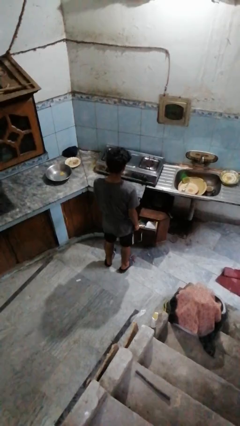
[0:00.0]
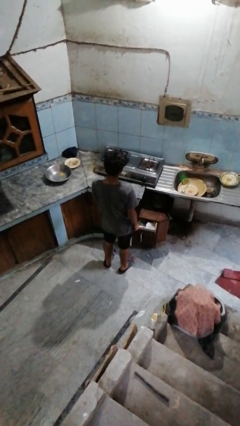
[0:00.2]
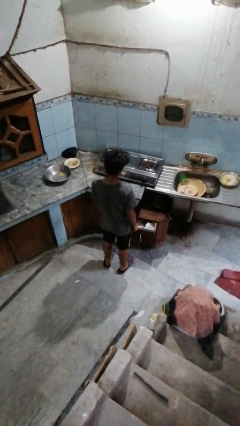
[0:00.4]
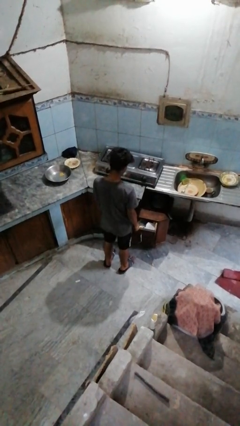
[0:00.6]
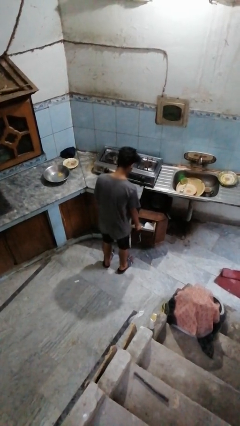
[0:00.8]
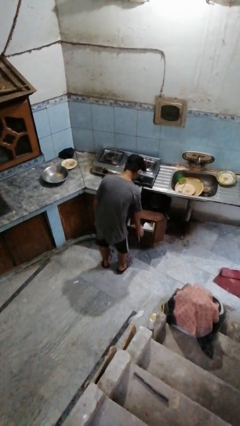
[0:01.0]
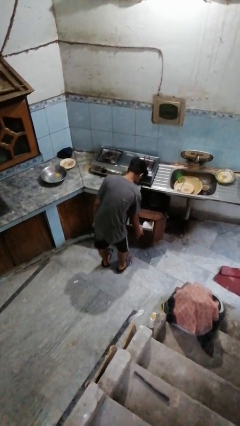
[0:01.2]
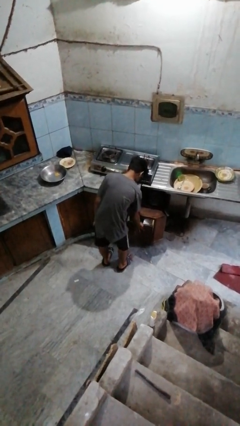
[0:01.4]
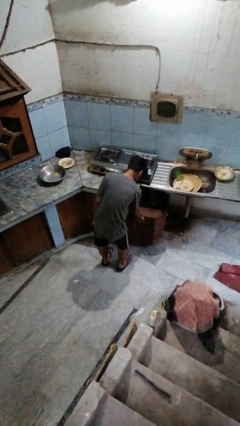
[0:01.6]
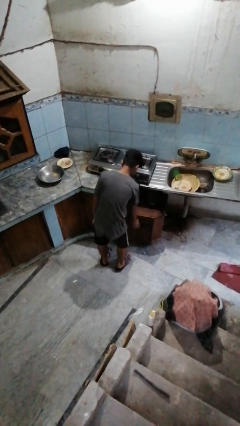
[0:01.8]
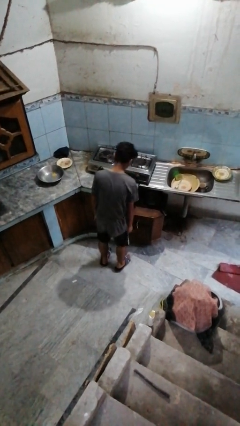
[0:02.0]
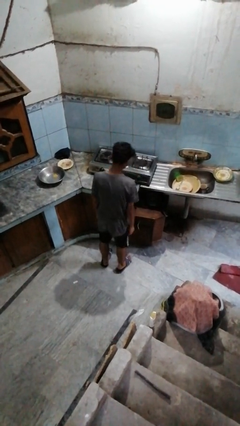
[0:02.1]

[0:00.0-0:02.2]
person closes kitchen drawer

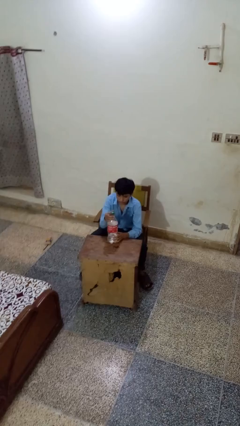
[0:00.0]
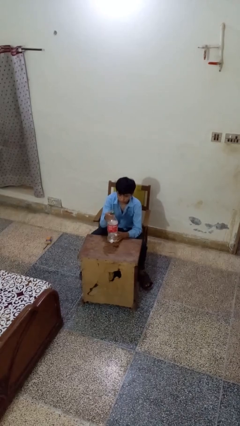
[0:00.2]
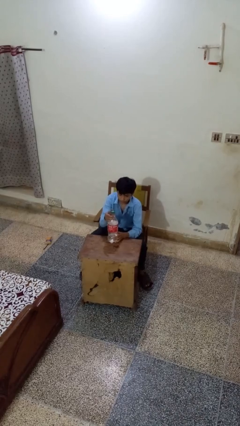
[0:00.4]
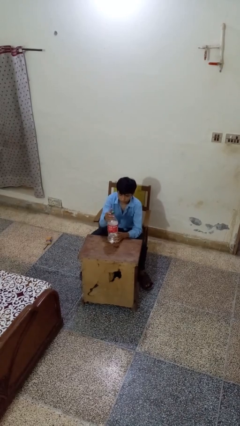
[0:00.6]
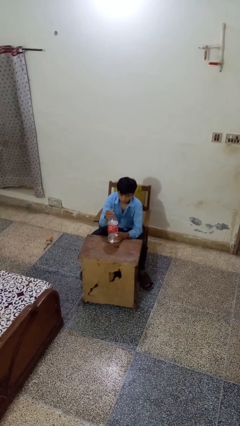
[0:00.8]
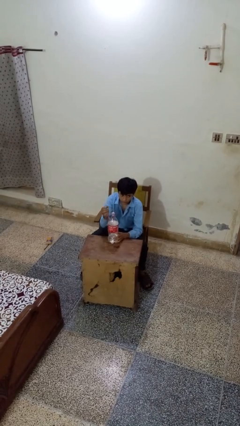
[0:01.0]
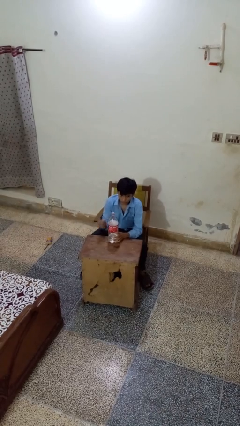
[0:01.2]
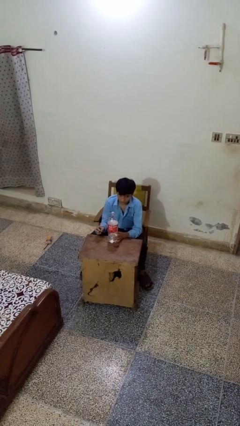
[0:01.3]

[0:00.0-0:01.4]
person unscrews lid from bottle

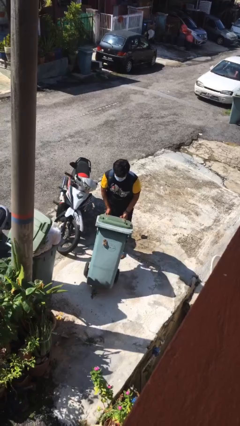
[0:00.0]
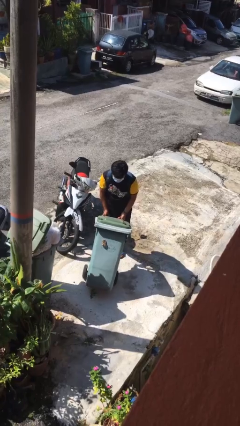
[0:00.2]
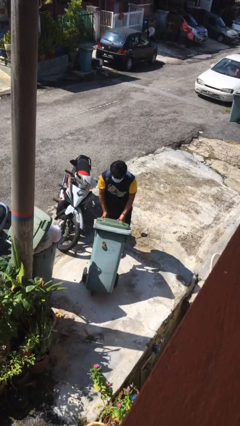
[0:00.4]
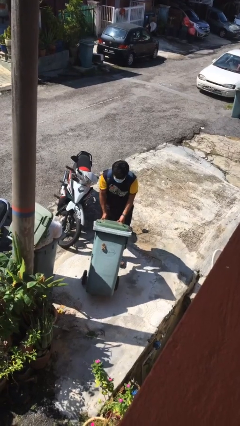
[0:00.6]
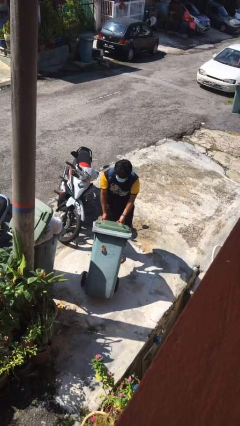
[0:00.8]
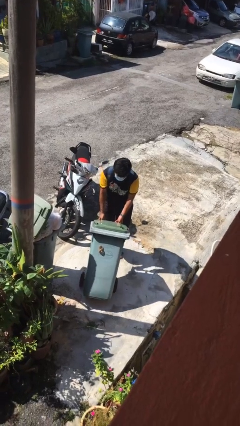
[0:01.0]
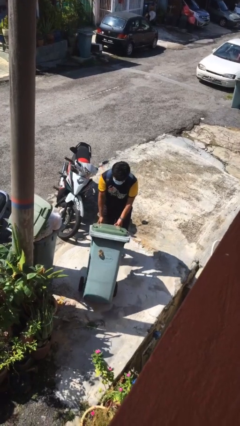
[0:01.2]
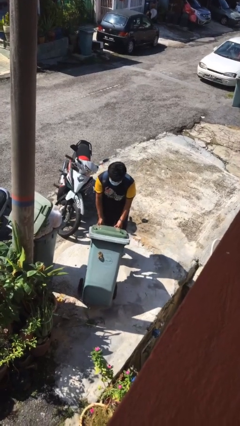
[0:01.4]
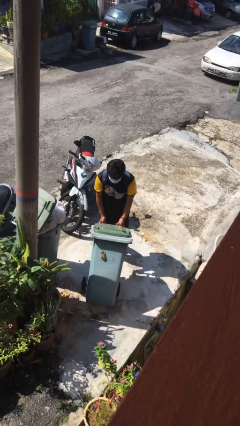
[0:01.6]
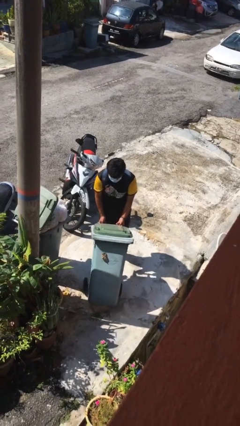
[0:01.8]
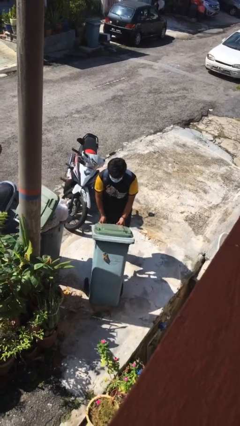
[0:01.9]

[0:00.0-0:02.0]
person pushes wheeled trashcan

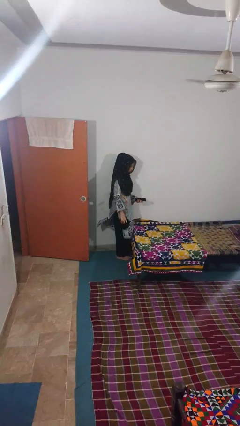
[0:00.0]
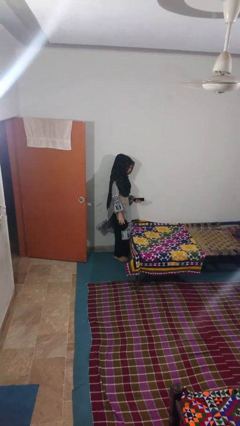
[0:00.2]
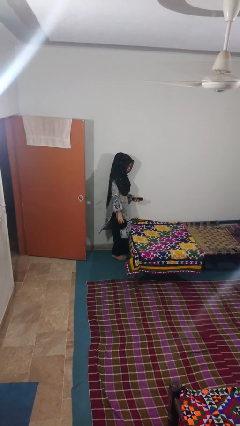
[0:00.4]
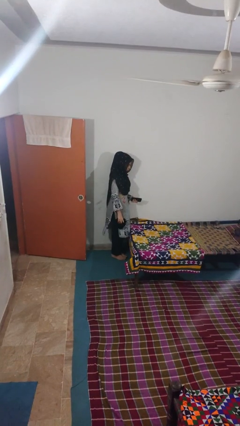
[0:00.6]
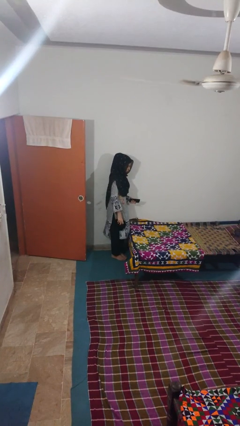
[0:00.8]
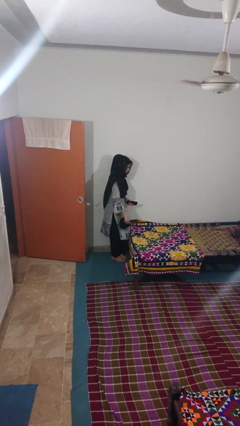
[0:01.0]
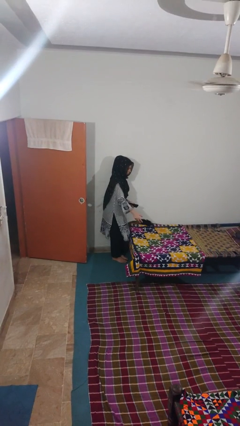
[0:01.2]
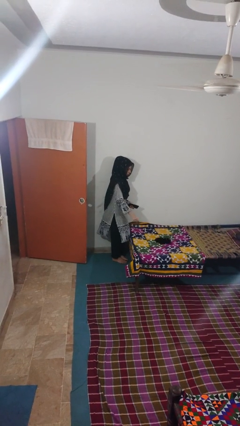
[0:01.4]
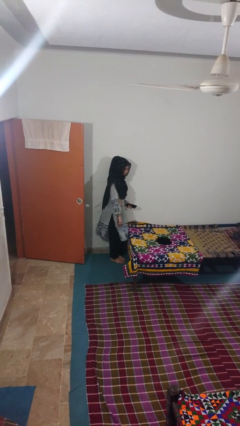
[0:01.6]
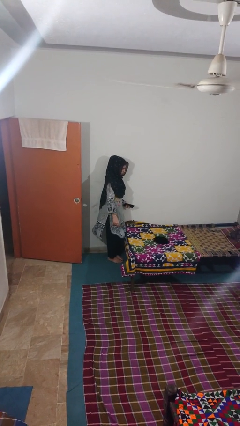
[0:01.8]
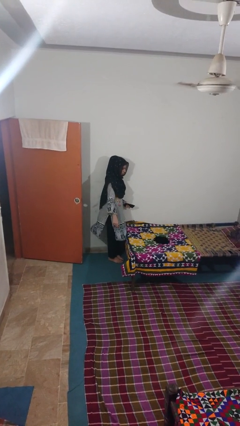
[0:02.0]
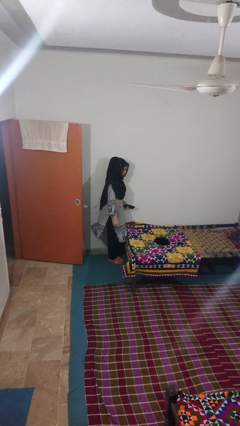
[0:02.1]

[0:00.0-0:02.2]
person throws object on bed

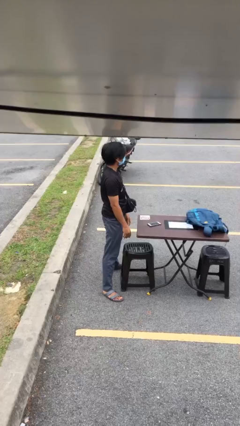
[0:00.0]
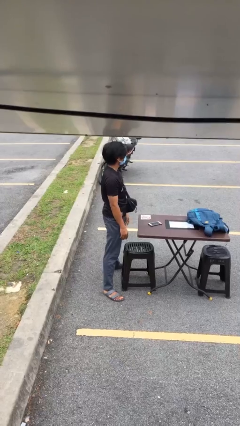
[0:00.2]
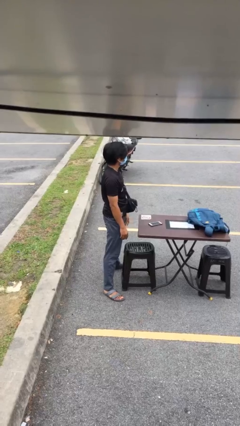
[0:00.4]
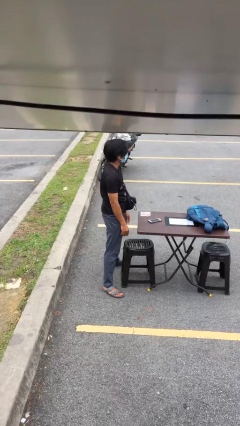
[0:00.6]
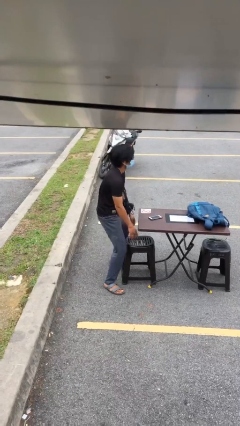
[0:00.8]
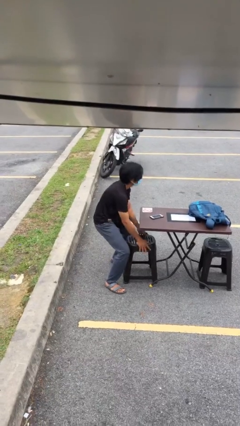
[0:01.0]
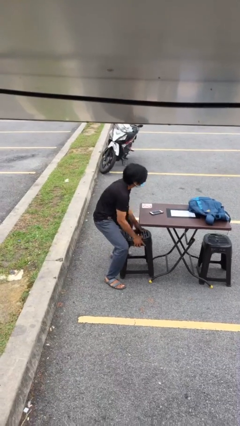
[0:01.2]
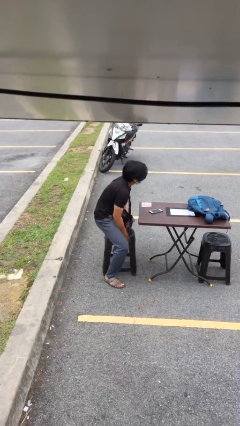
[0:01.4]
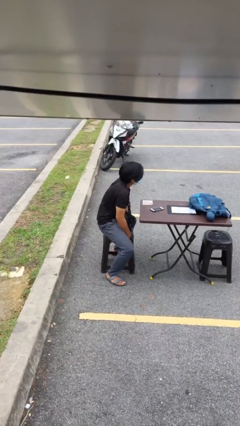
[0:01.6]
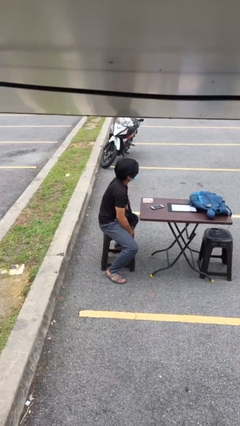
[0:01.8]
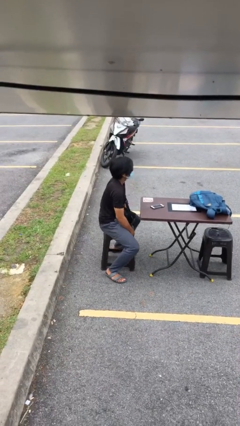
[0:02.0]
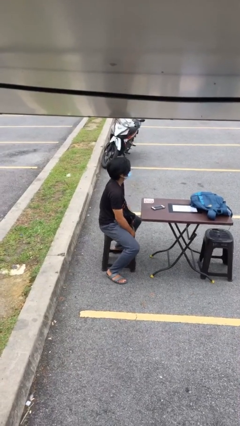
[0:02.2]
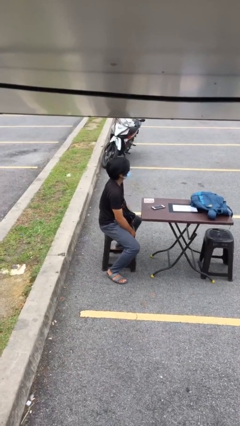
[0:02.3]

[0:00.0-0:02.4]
person sits down

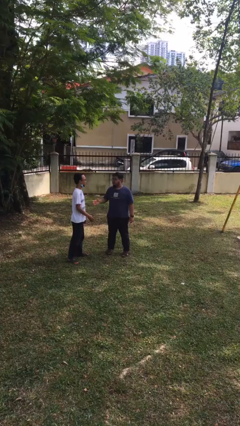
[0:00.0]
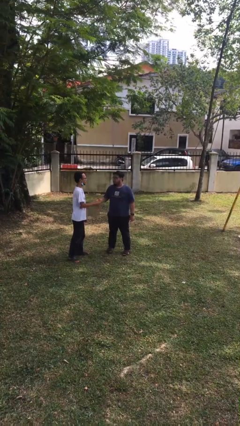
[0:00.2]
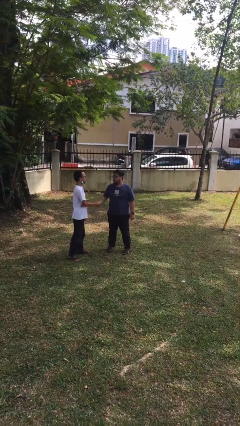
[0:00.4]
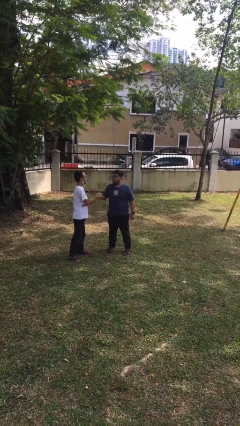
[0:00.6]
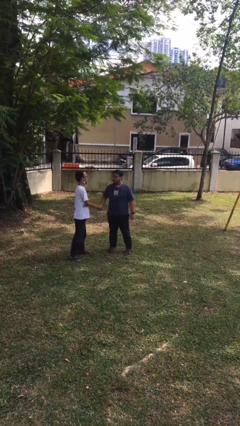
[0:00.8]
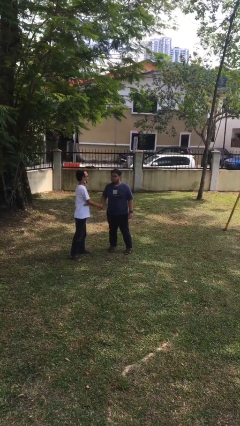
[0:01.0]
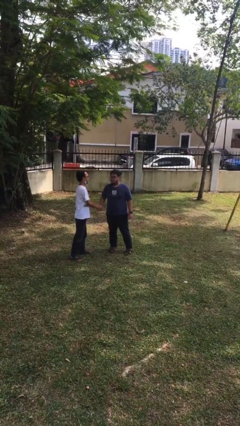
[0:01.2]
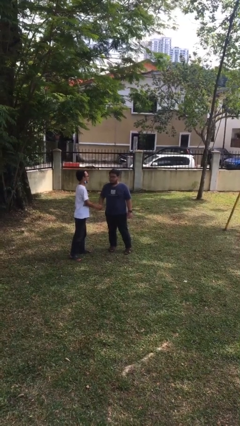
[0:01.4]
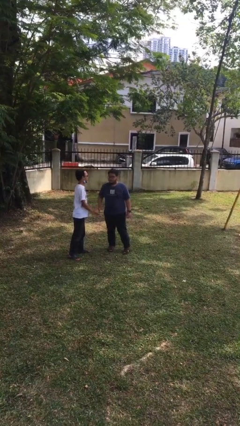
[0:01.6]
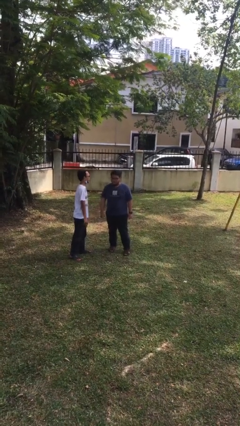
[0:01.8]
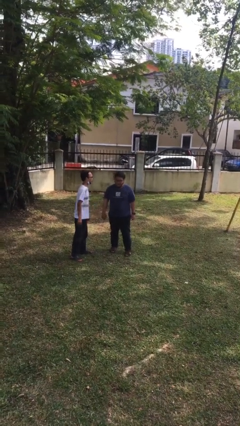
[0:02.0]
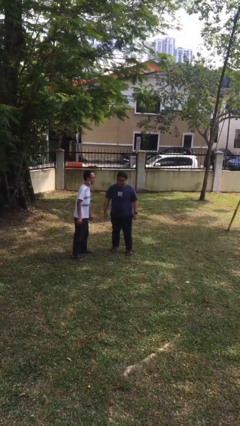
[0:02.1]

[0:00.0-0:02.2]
person shakes hand

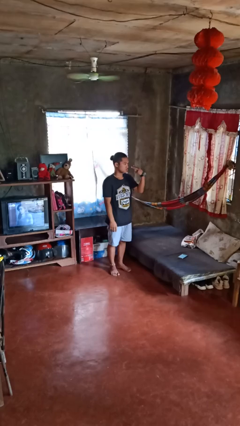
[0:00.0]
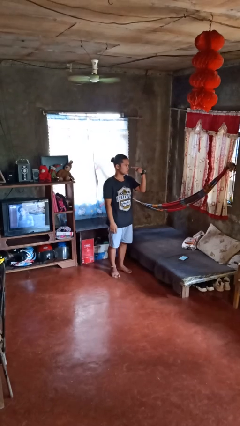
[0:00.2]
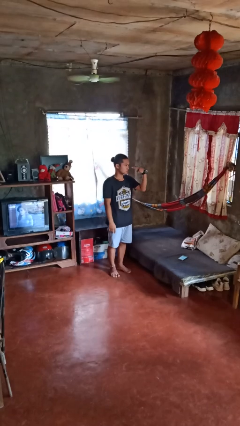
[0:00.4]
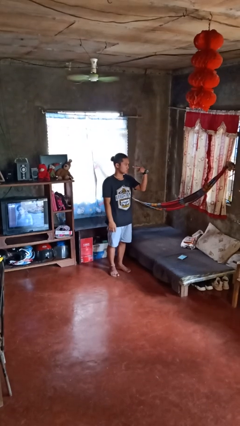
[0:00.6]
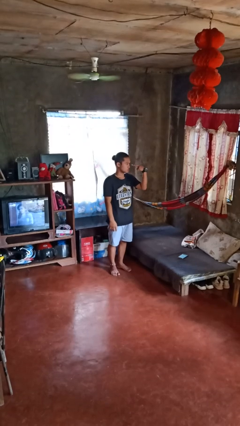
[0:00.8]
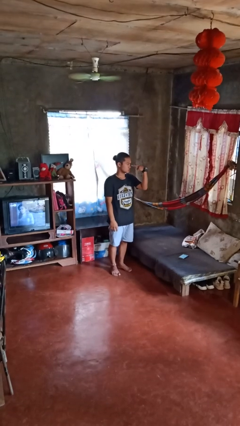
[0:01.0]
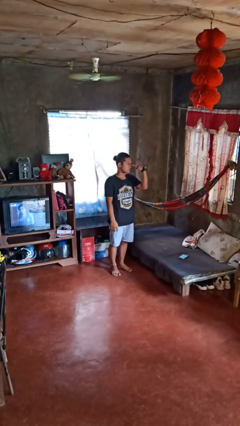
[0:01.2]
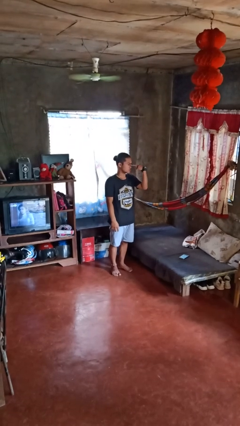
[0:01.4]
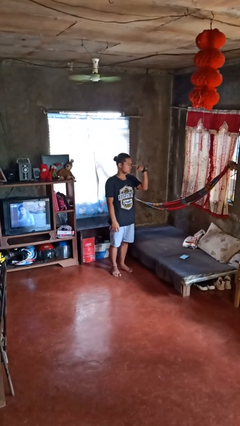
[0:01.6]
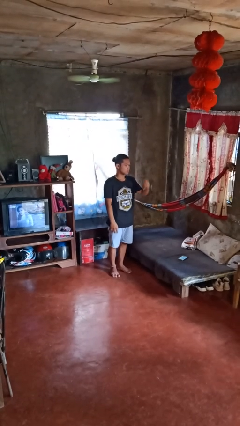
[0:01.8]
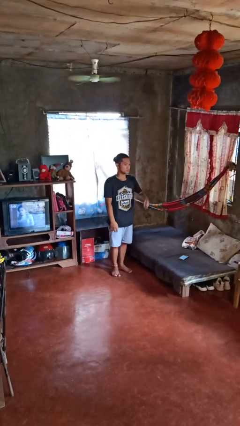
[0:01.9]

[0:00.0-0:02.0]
person gestures watch closely

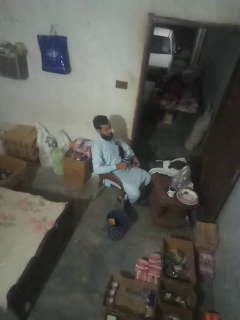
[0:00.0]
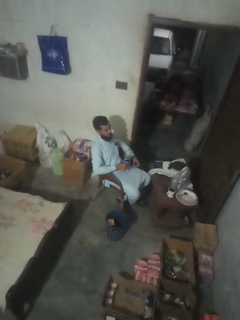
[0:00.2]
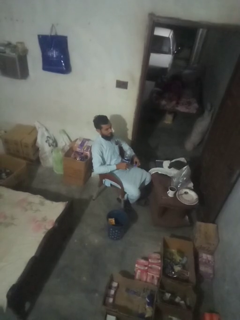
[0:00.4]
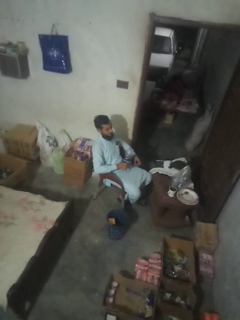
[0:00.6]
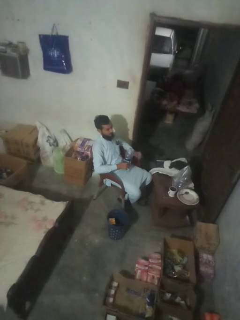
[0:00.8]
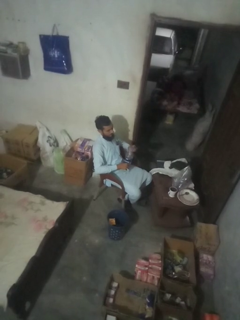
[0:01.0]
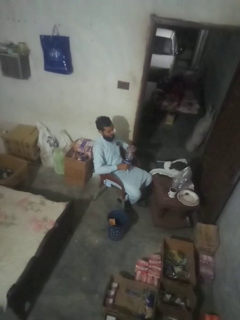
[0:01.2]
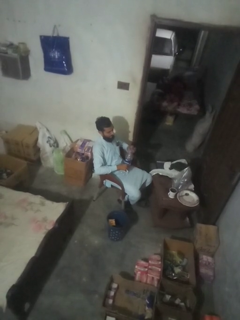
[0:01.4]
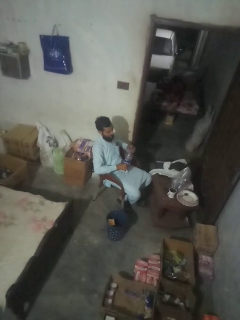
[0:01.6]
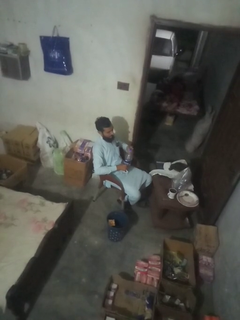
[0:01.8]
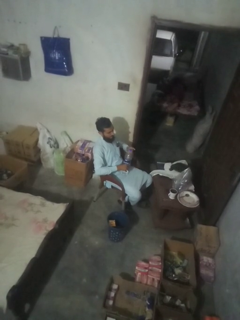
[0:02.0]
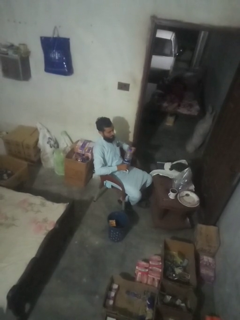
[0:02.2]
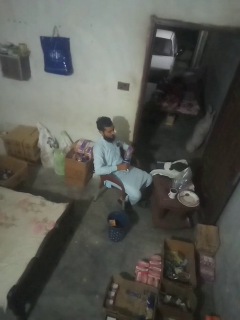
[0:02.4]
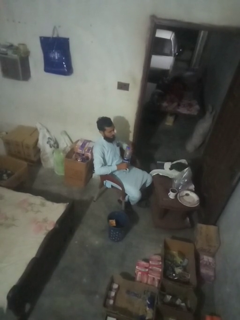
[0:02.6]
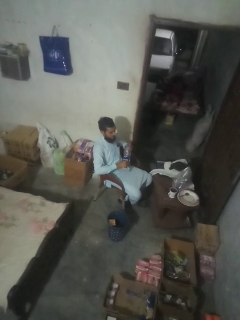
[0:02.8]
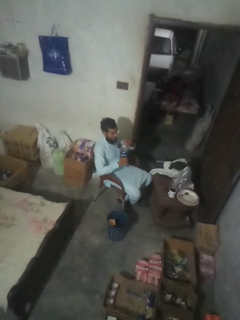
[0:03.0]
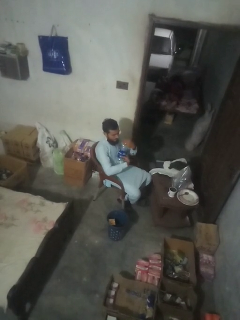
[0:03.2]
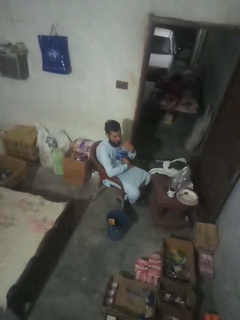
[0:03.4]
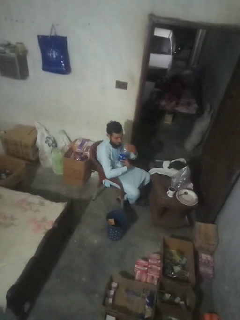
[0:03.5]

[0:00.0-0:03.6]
person screws lid to bottle
